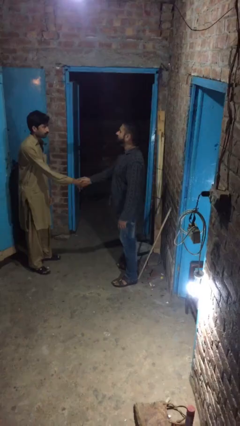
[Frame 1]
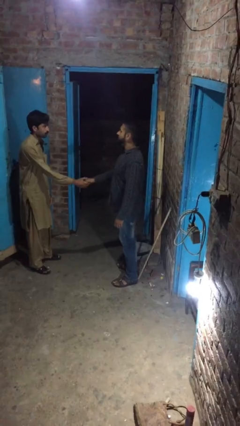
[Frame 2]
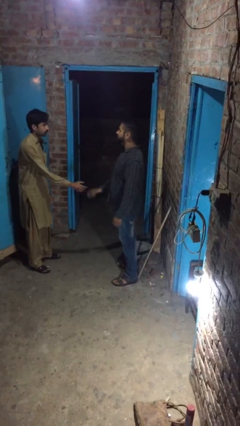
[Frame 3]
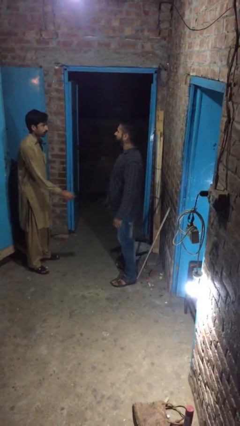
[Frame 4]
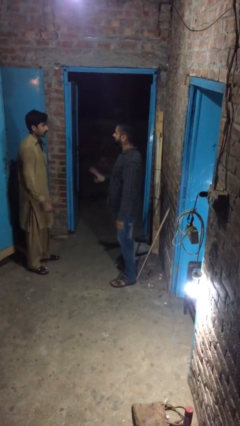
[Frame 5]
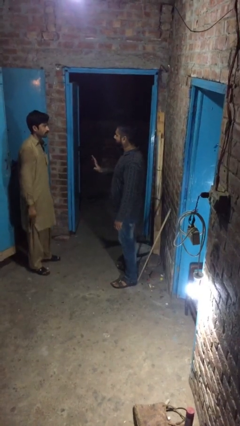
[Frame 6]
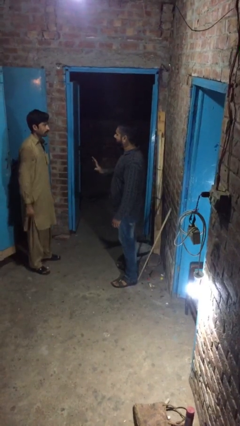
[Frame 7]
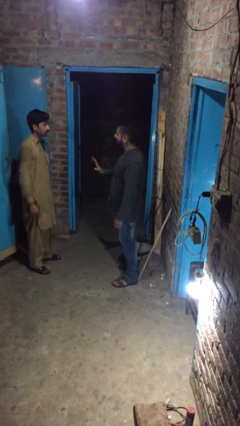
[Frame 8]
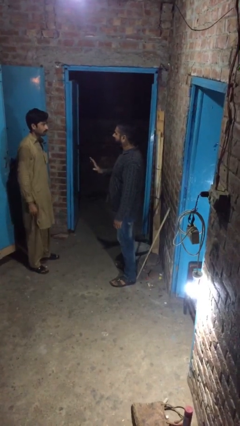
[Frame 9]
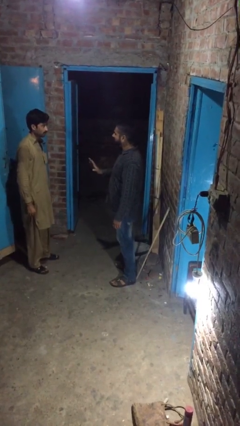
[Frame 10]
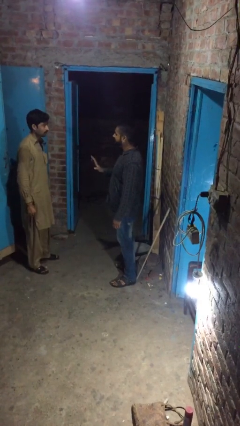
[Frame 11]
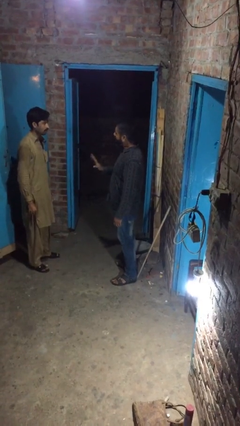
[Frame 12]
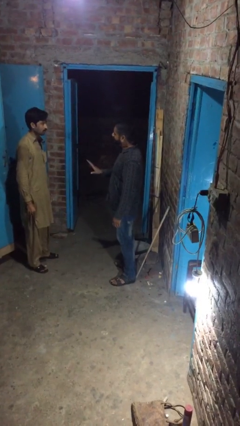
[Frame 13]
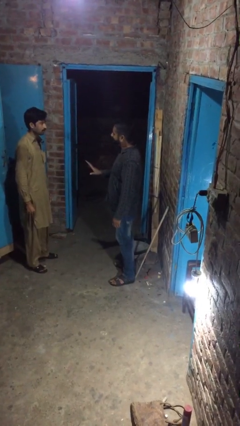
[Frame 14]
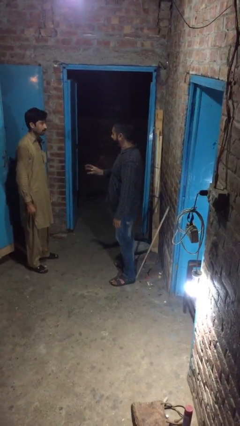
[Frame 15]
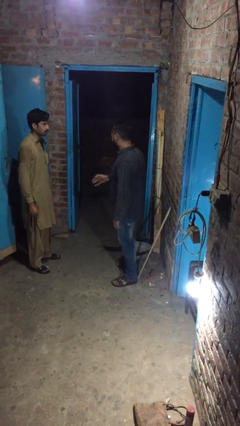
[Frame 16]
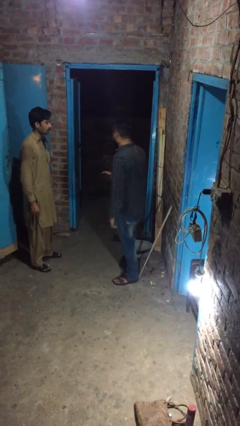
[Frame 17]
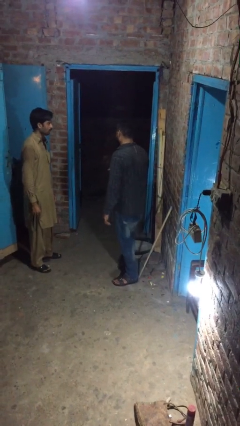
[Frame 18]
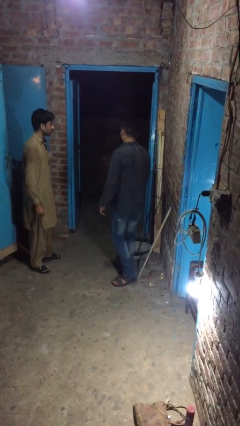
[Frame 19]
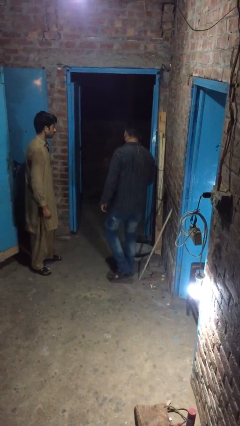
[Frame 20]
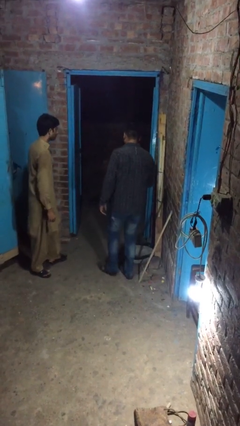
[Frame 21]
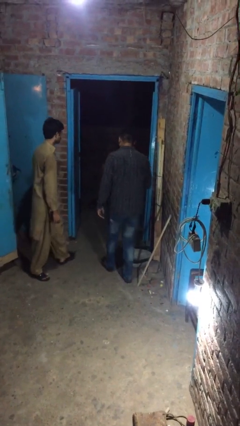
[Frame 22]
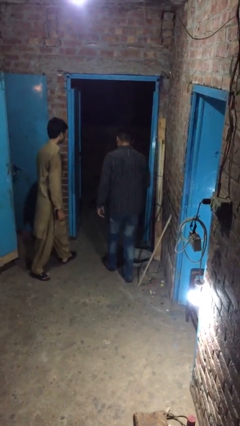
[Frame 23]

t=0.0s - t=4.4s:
person talks to person

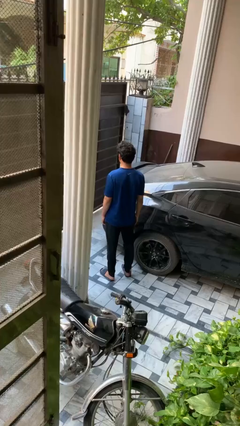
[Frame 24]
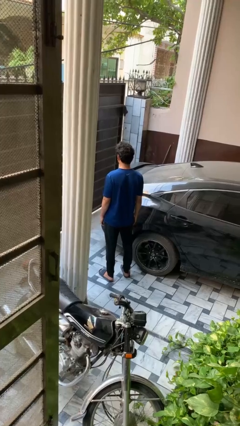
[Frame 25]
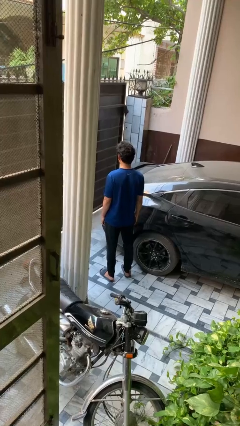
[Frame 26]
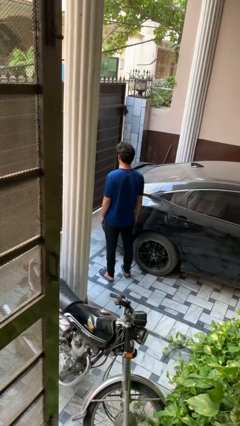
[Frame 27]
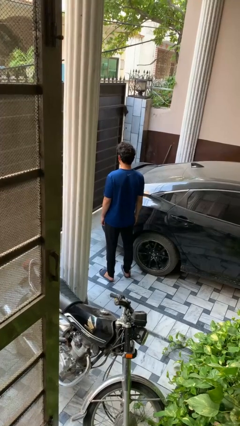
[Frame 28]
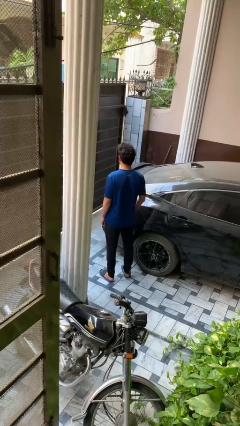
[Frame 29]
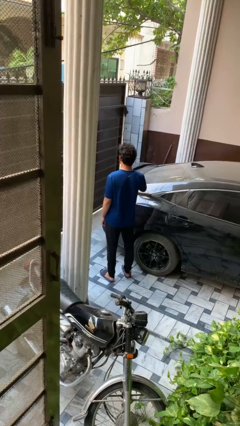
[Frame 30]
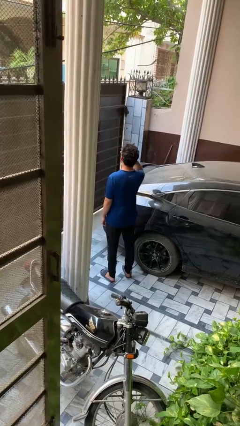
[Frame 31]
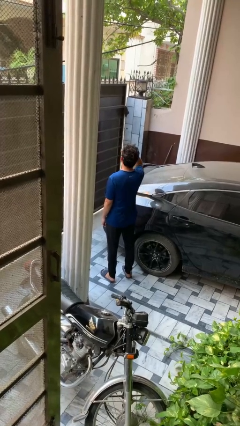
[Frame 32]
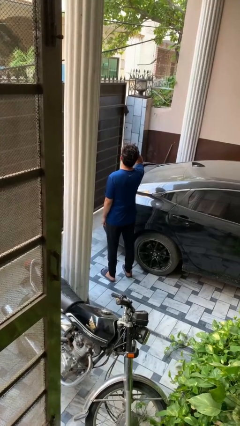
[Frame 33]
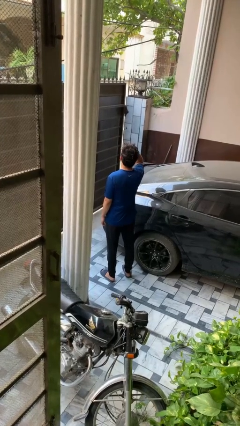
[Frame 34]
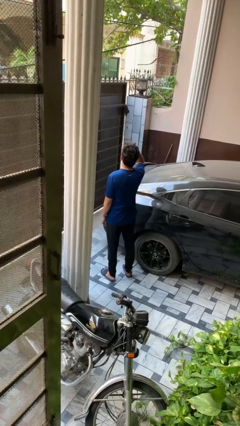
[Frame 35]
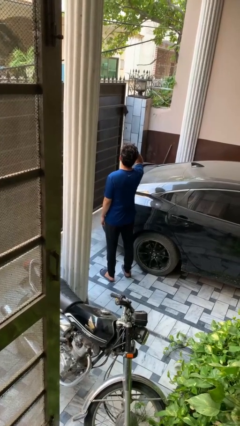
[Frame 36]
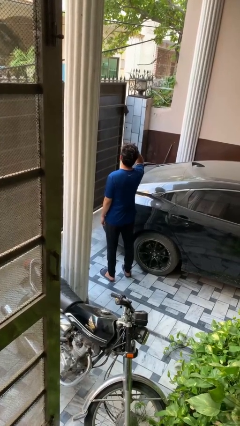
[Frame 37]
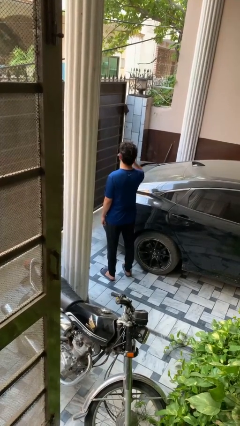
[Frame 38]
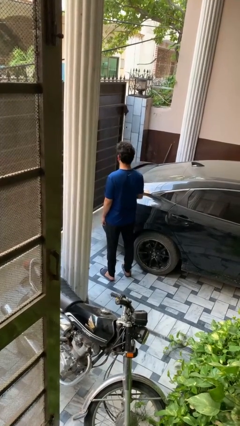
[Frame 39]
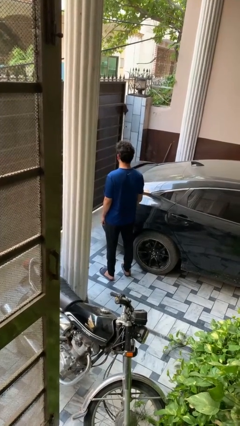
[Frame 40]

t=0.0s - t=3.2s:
person shades eyes

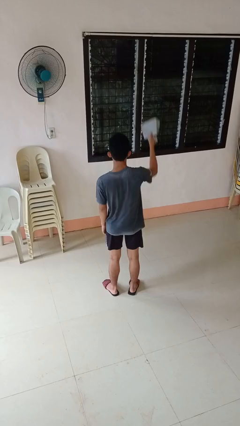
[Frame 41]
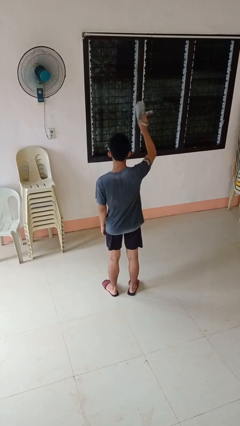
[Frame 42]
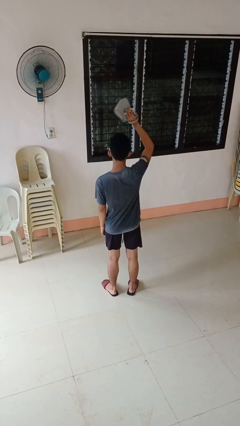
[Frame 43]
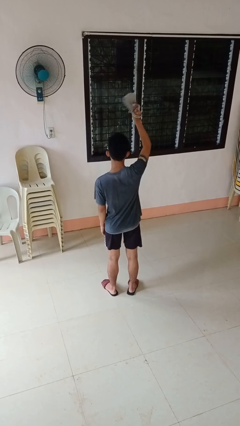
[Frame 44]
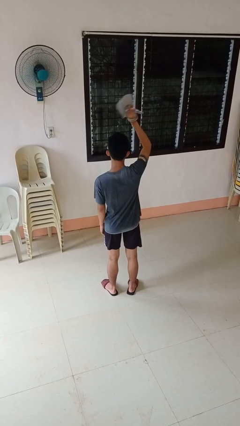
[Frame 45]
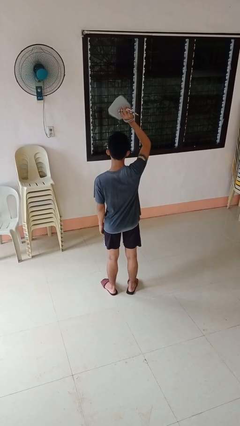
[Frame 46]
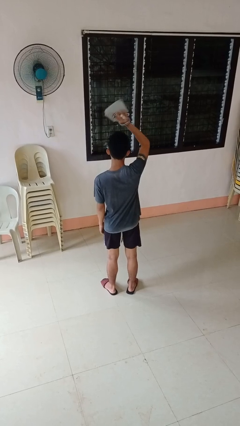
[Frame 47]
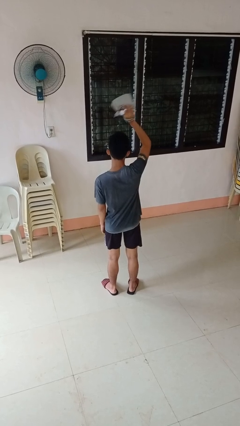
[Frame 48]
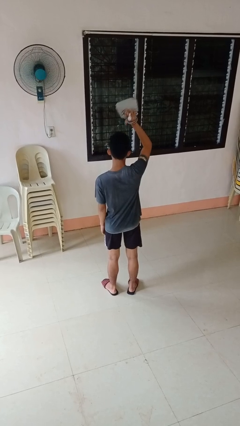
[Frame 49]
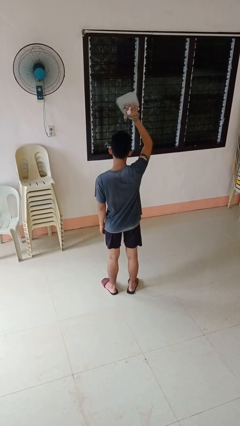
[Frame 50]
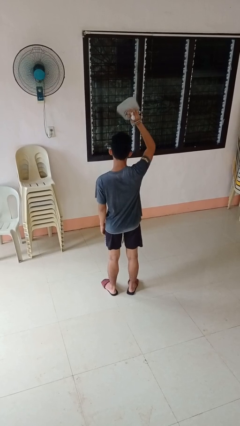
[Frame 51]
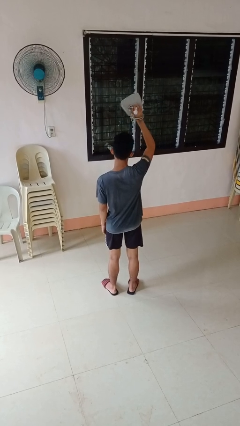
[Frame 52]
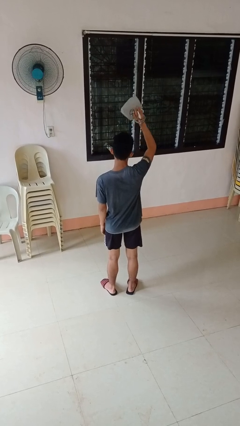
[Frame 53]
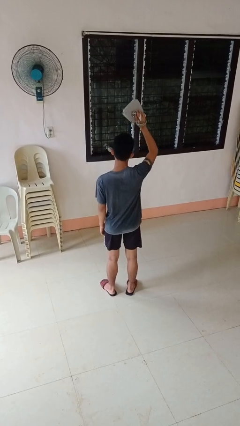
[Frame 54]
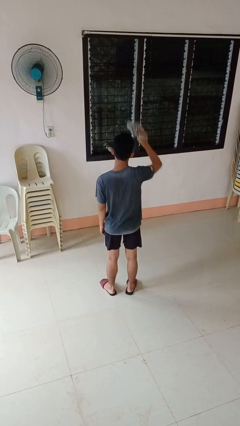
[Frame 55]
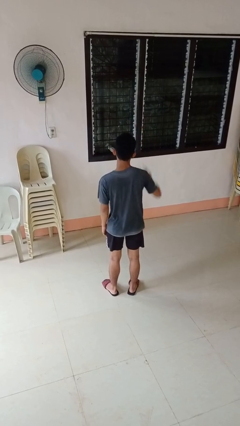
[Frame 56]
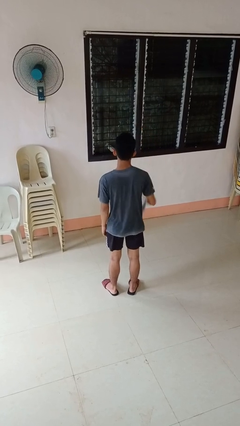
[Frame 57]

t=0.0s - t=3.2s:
person holds object above head

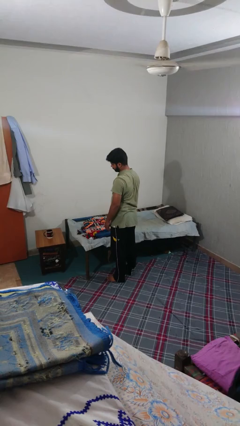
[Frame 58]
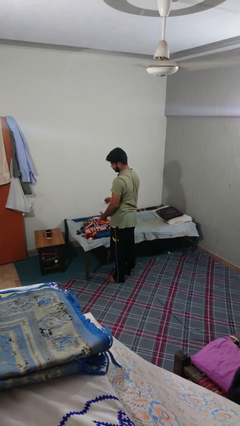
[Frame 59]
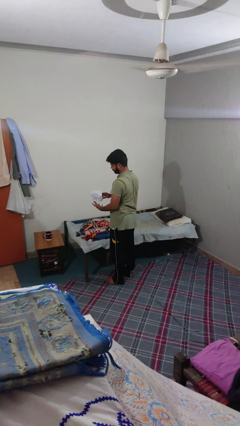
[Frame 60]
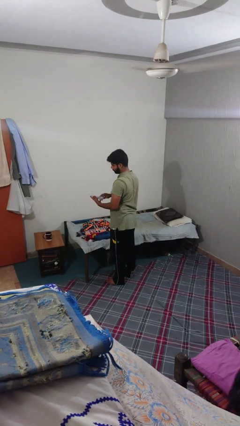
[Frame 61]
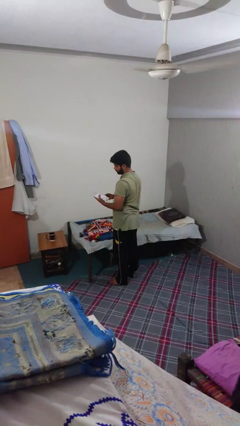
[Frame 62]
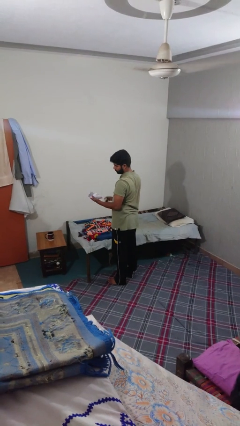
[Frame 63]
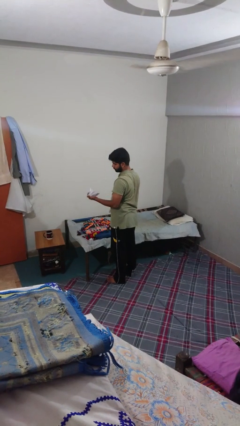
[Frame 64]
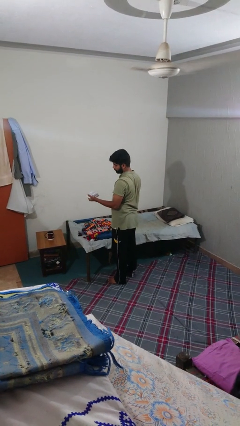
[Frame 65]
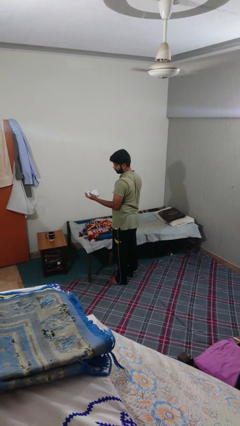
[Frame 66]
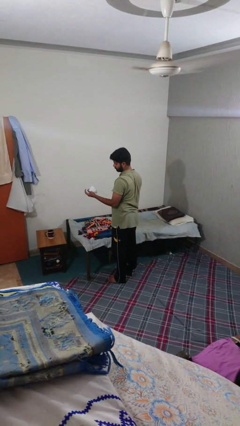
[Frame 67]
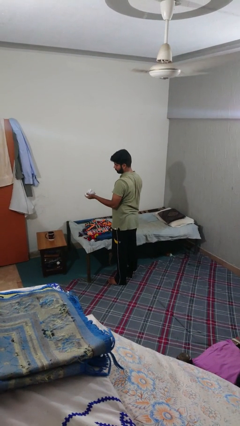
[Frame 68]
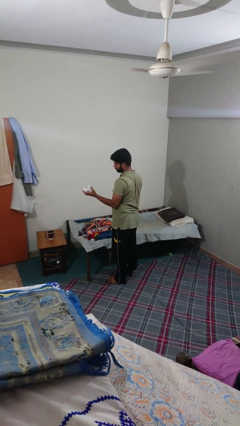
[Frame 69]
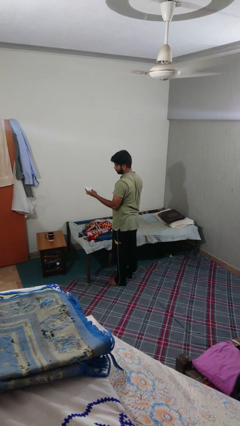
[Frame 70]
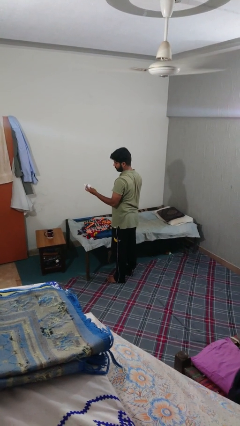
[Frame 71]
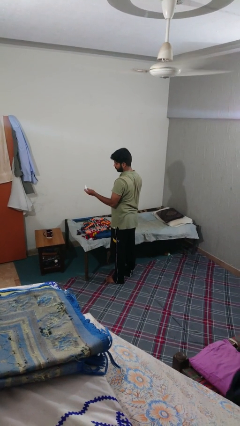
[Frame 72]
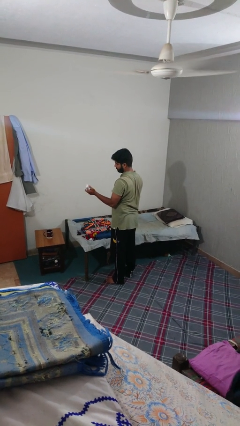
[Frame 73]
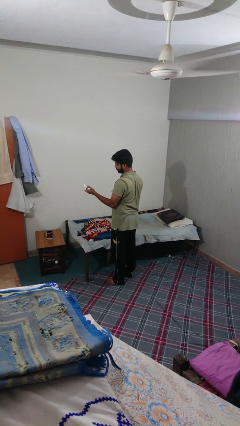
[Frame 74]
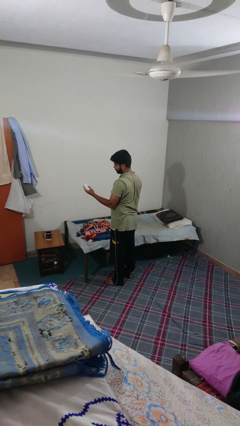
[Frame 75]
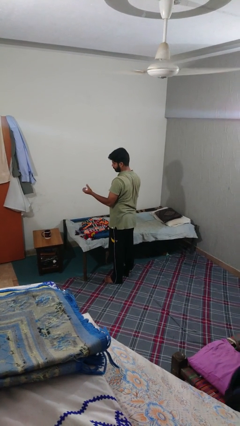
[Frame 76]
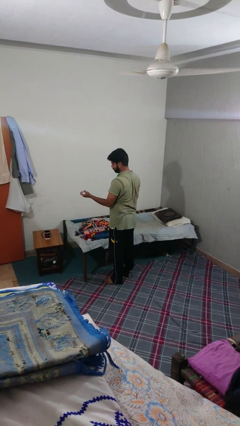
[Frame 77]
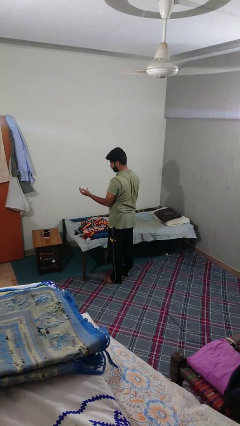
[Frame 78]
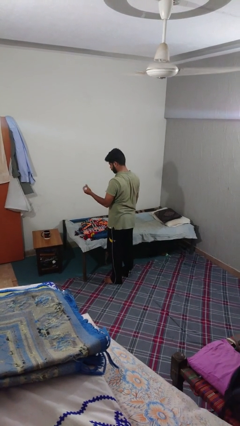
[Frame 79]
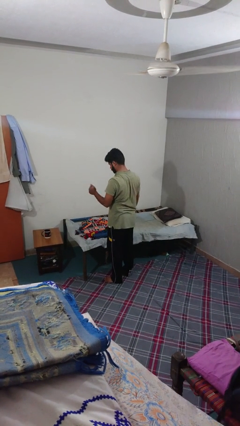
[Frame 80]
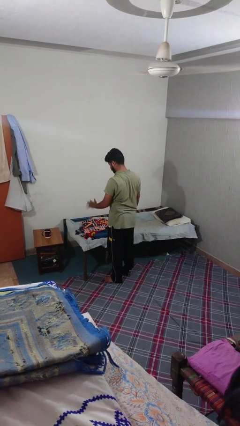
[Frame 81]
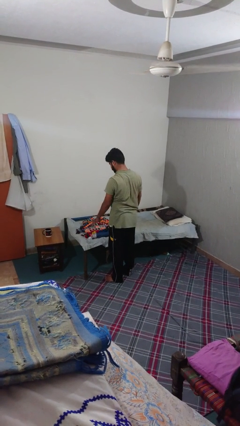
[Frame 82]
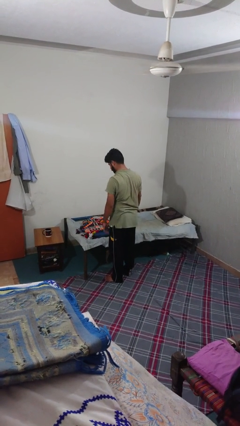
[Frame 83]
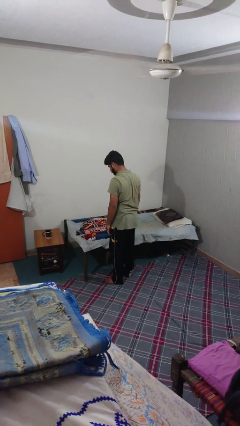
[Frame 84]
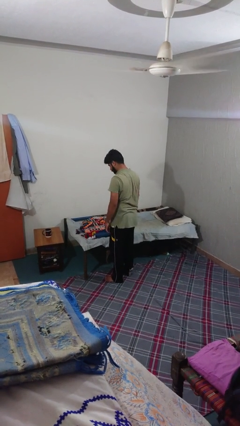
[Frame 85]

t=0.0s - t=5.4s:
person crumples paper

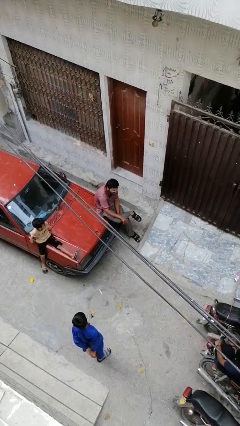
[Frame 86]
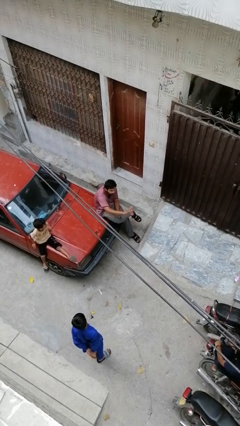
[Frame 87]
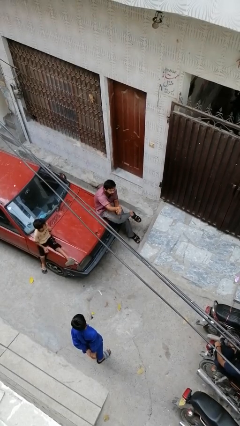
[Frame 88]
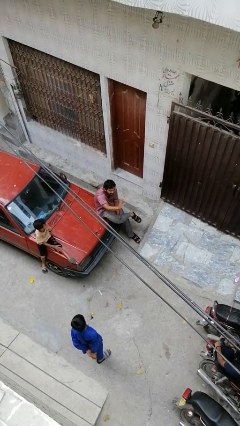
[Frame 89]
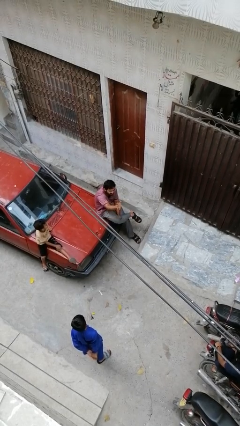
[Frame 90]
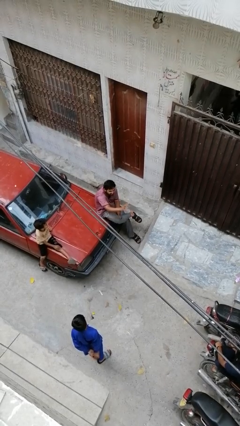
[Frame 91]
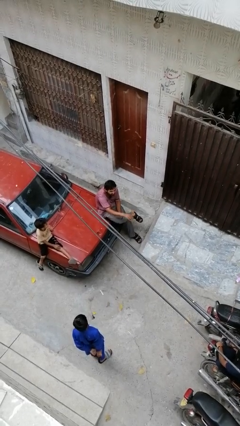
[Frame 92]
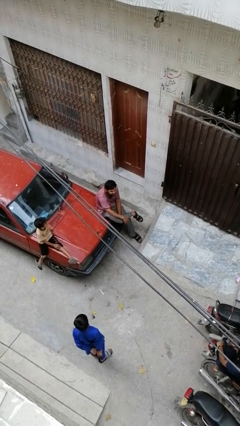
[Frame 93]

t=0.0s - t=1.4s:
person waves at person

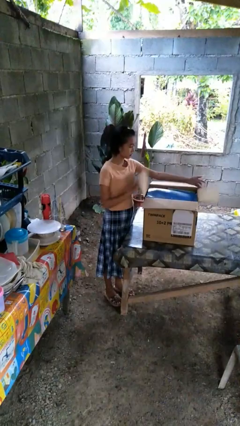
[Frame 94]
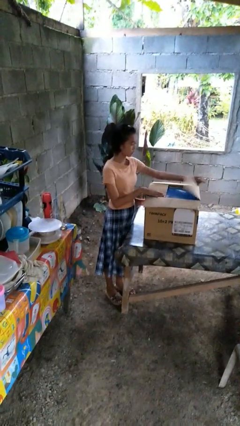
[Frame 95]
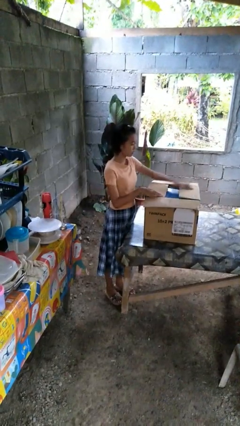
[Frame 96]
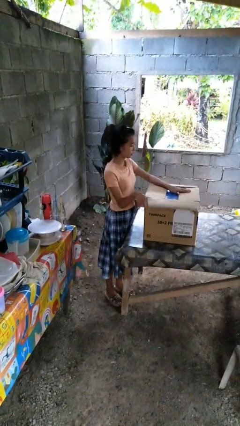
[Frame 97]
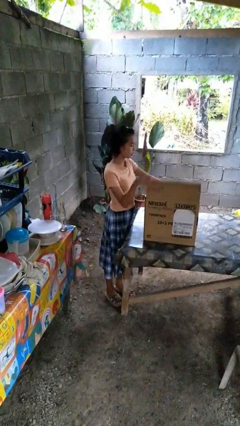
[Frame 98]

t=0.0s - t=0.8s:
person closes box
